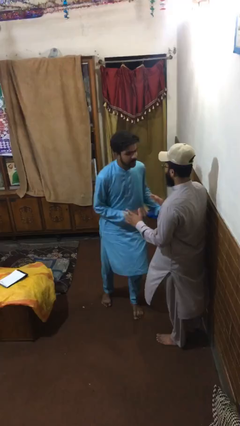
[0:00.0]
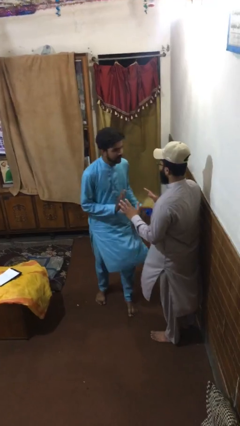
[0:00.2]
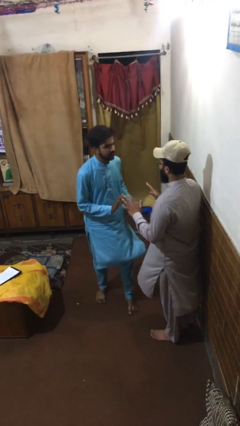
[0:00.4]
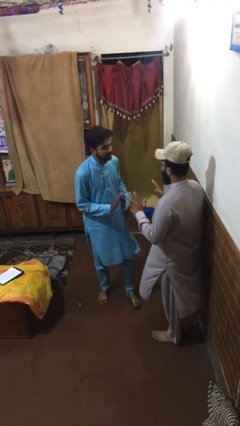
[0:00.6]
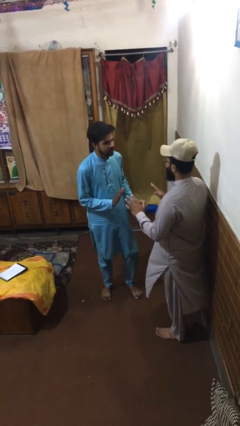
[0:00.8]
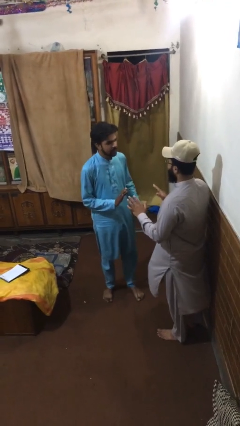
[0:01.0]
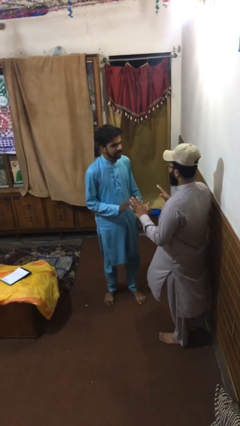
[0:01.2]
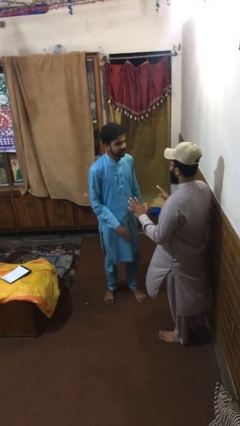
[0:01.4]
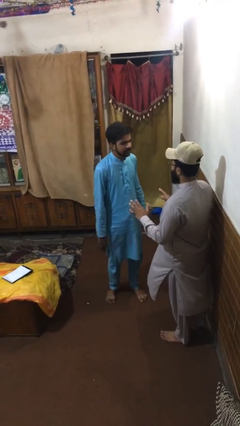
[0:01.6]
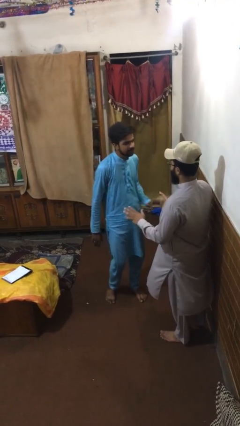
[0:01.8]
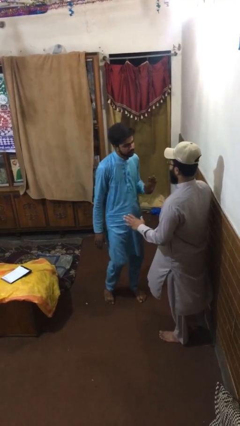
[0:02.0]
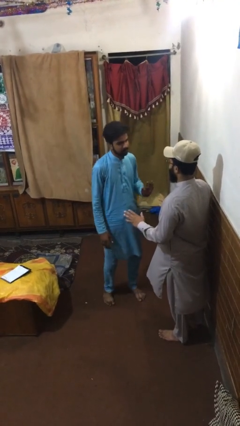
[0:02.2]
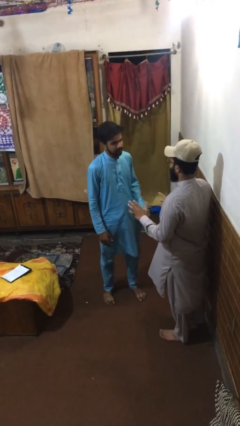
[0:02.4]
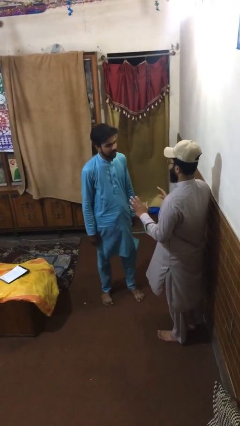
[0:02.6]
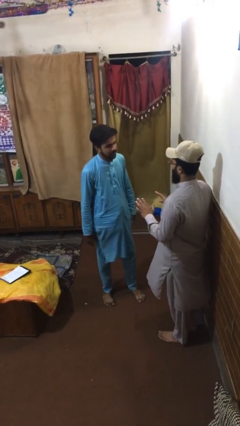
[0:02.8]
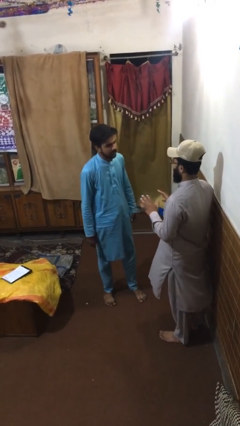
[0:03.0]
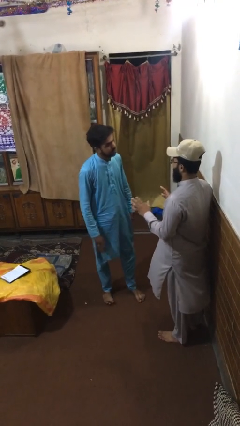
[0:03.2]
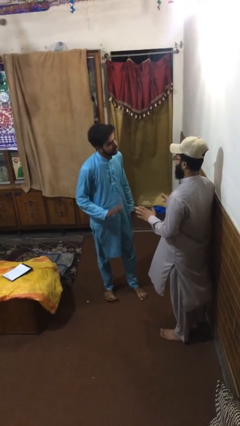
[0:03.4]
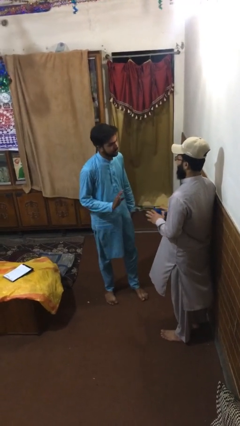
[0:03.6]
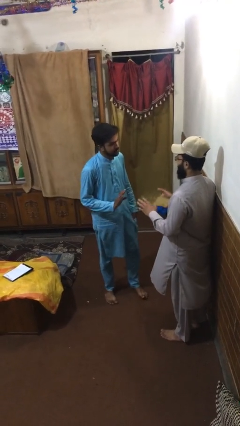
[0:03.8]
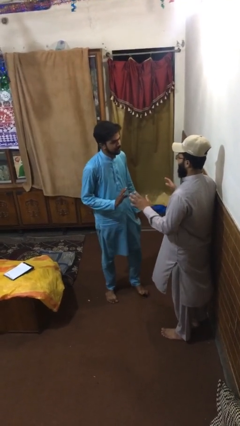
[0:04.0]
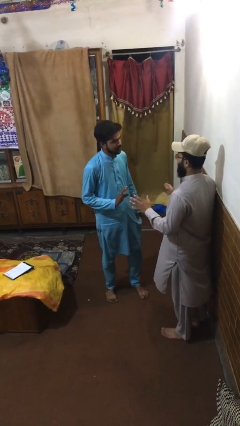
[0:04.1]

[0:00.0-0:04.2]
person talks to person

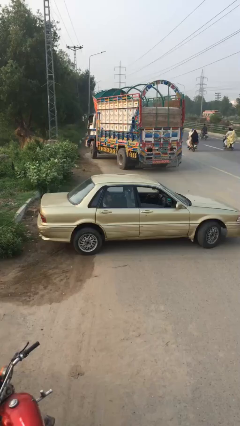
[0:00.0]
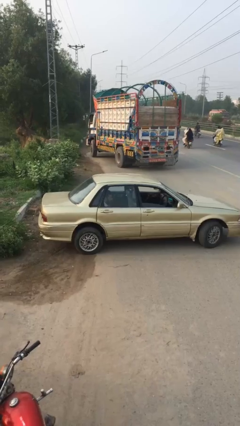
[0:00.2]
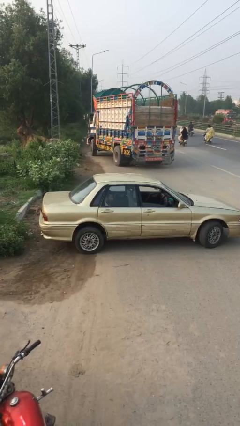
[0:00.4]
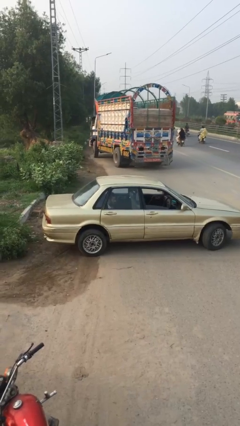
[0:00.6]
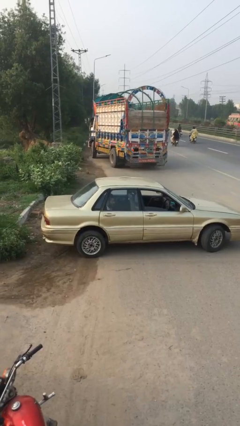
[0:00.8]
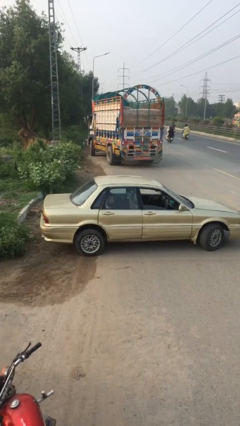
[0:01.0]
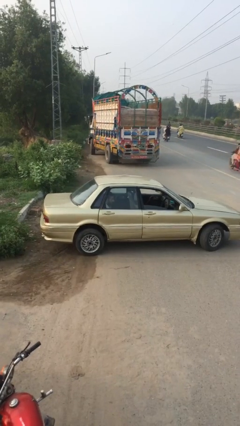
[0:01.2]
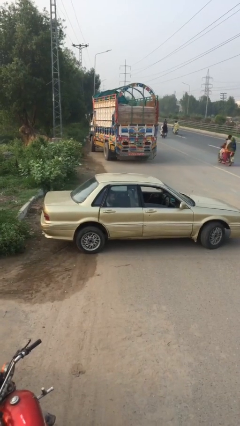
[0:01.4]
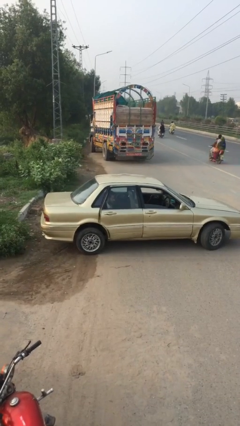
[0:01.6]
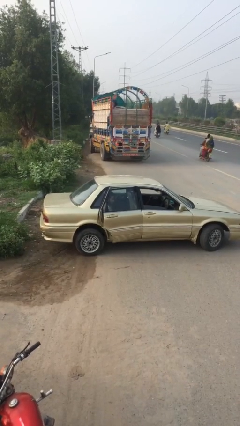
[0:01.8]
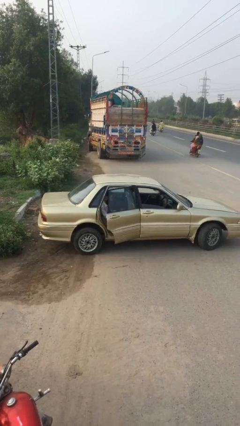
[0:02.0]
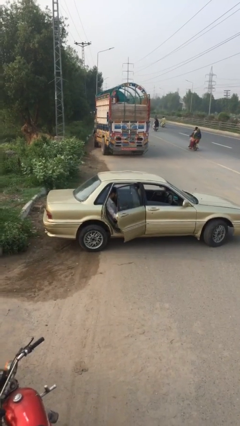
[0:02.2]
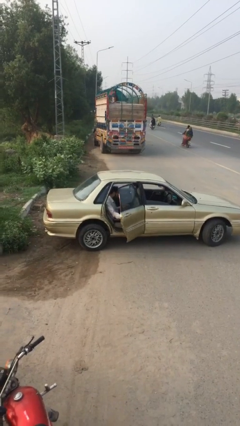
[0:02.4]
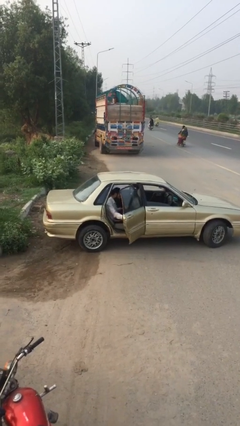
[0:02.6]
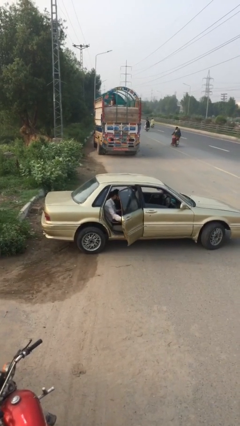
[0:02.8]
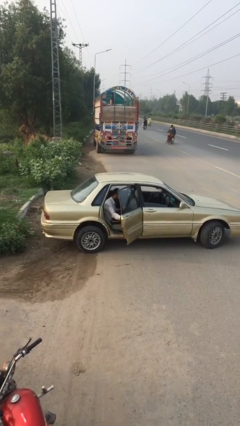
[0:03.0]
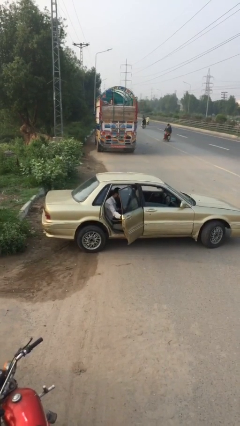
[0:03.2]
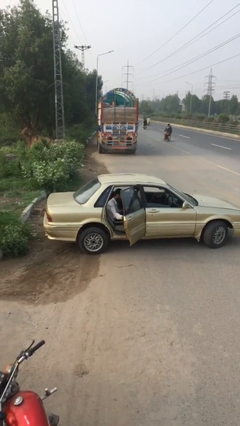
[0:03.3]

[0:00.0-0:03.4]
person opens car door

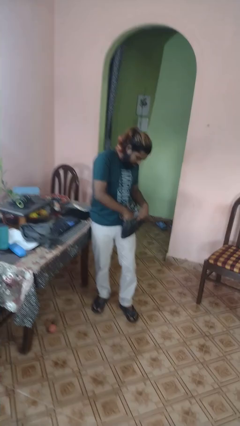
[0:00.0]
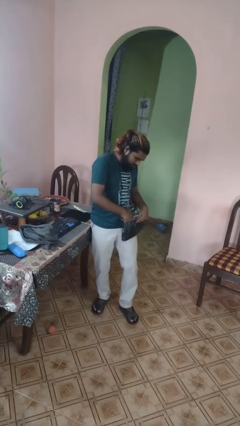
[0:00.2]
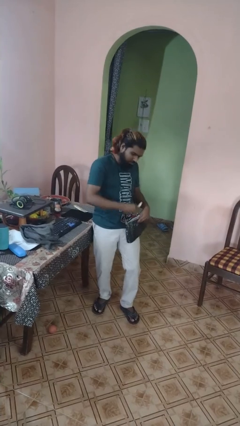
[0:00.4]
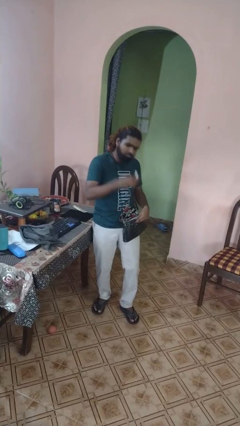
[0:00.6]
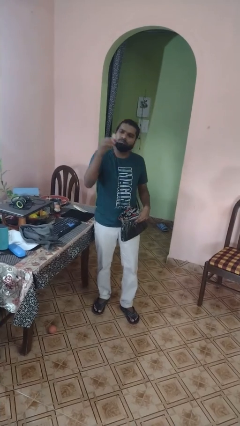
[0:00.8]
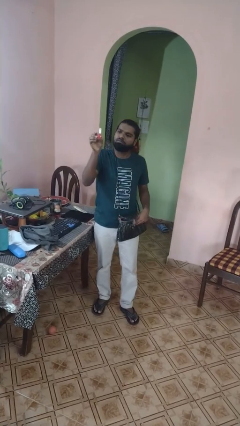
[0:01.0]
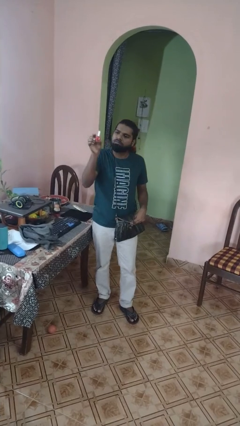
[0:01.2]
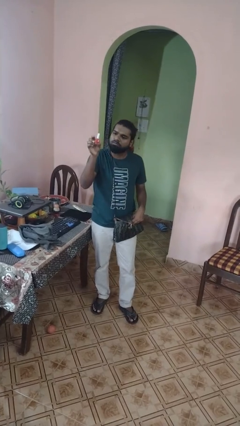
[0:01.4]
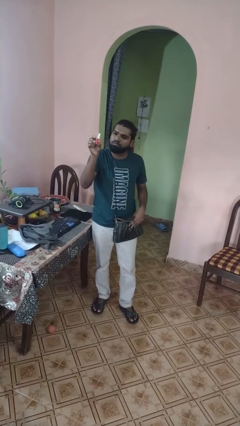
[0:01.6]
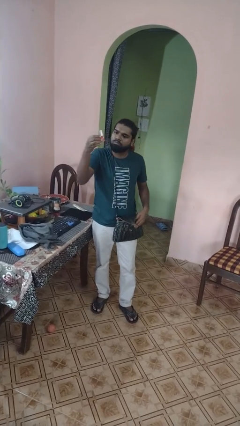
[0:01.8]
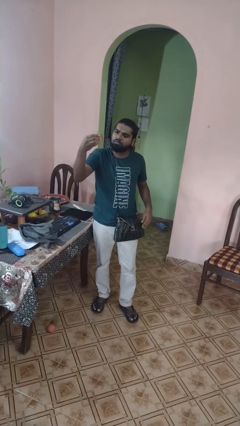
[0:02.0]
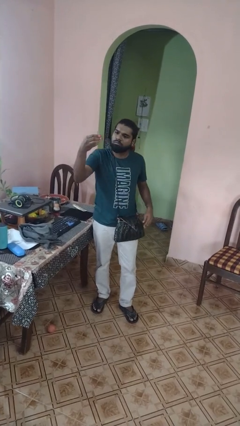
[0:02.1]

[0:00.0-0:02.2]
person takes object from purse

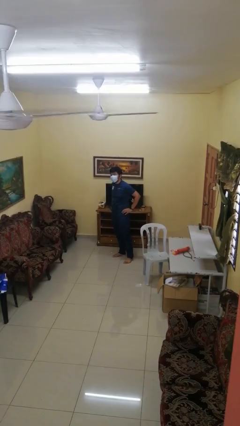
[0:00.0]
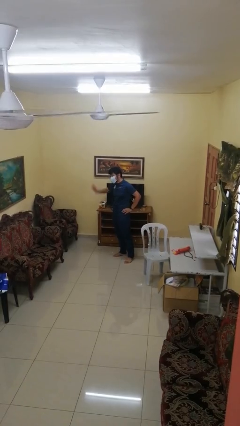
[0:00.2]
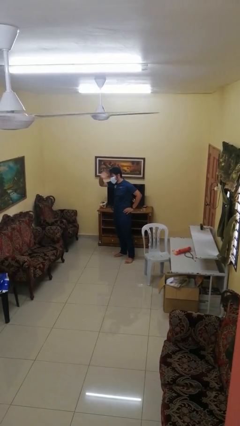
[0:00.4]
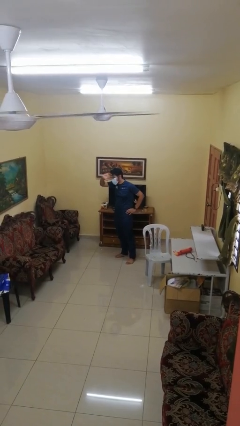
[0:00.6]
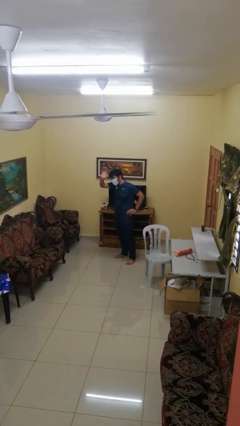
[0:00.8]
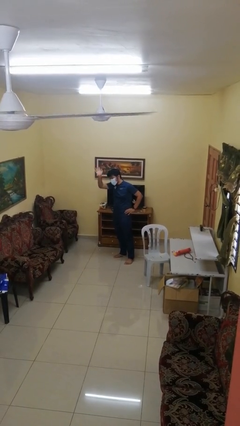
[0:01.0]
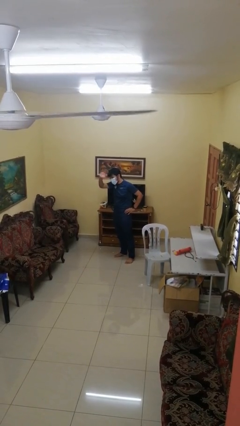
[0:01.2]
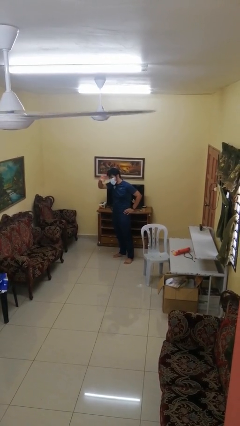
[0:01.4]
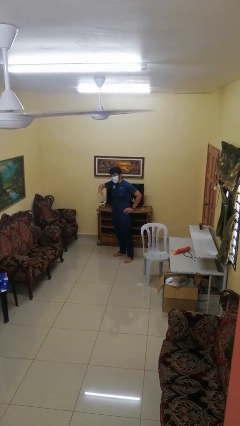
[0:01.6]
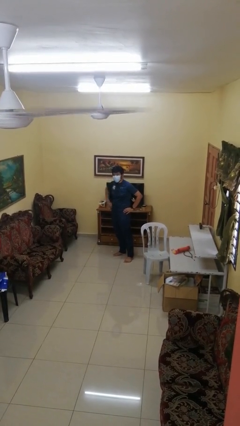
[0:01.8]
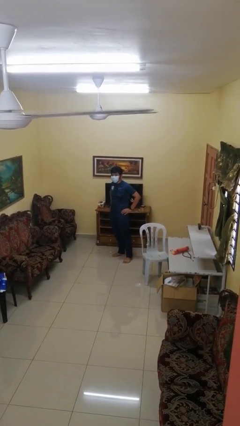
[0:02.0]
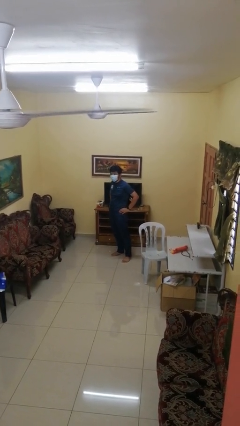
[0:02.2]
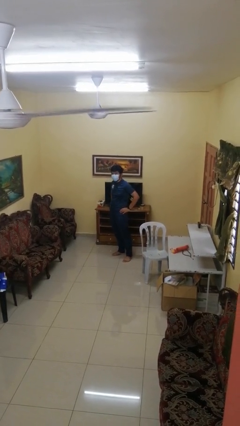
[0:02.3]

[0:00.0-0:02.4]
person waves at person

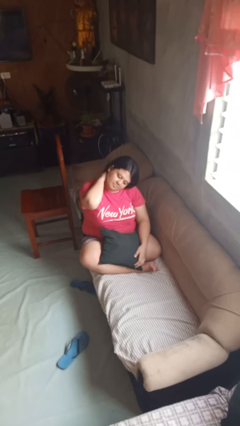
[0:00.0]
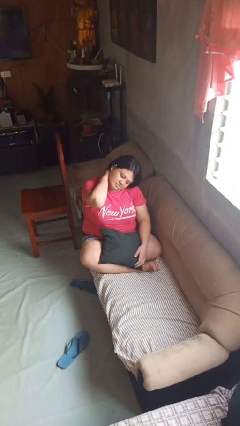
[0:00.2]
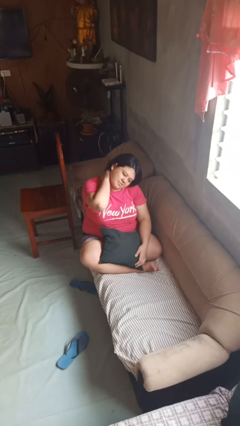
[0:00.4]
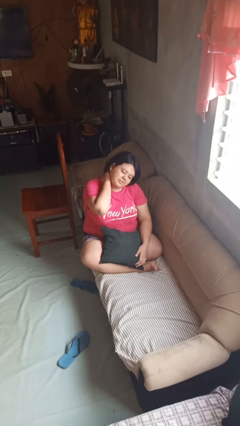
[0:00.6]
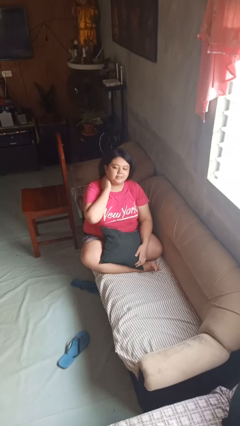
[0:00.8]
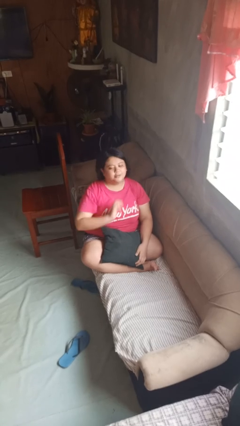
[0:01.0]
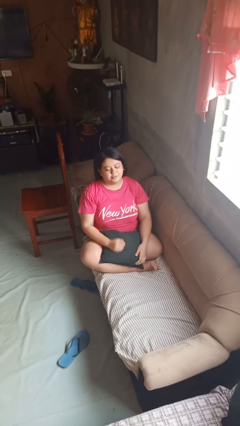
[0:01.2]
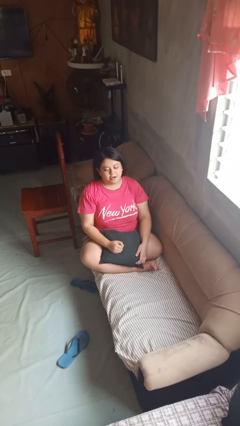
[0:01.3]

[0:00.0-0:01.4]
person rubs neck

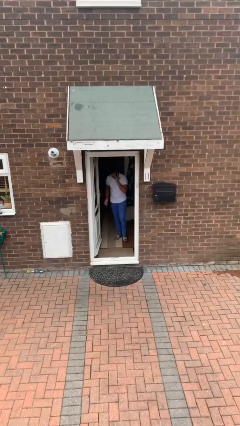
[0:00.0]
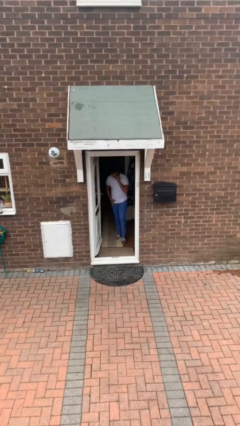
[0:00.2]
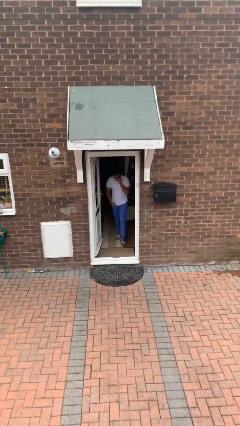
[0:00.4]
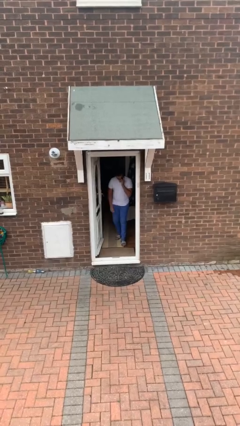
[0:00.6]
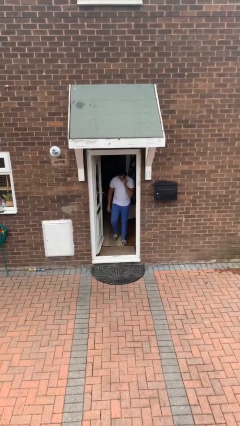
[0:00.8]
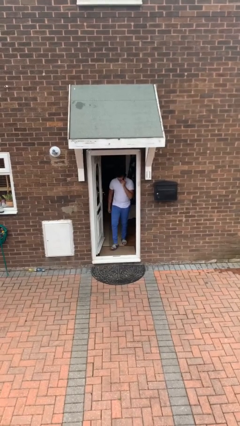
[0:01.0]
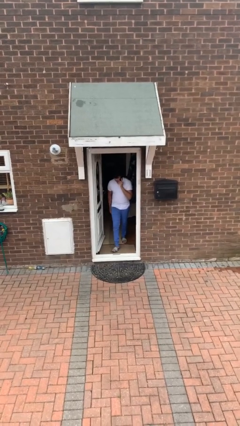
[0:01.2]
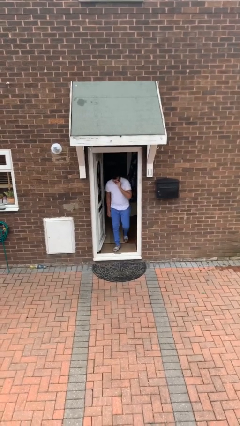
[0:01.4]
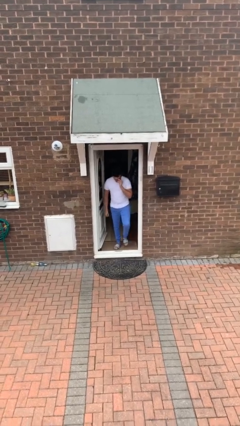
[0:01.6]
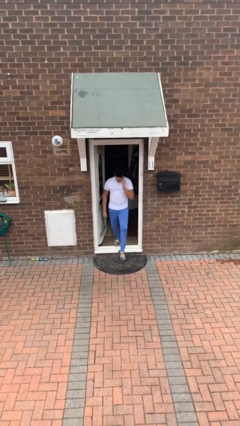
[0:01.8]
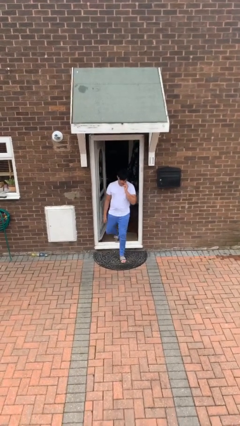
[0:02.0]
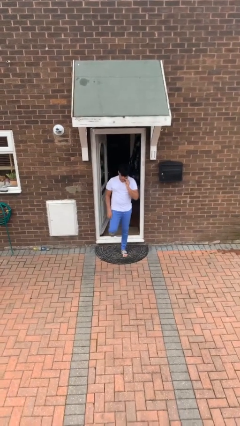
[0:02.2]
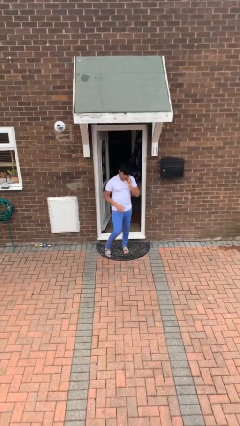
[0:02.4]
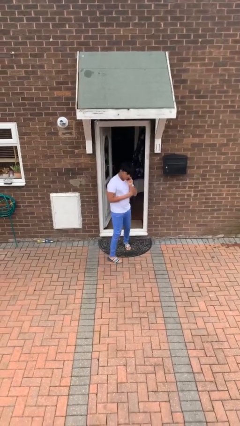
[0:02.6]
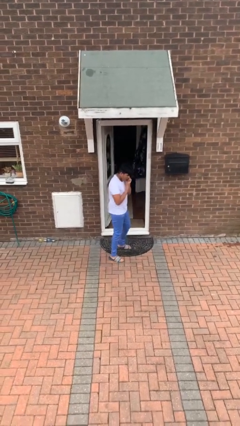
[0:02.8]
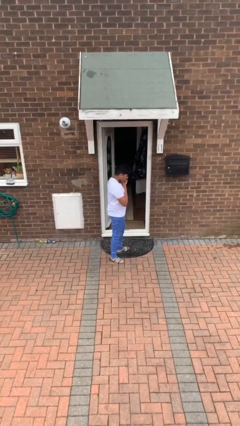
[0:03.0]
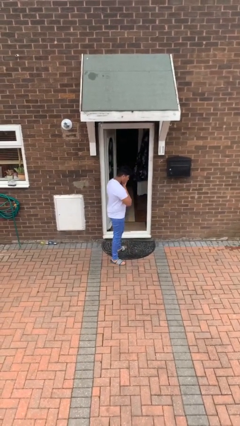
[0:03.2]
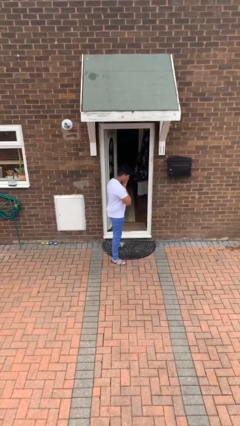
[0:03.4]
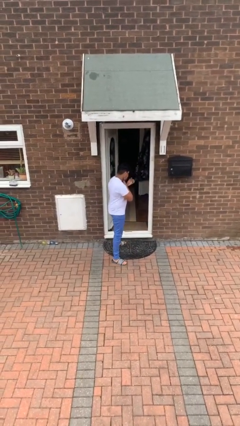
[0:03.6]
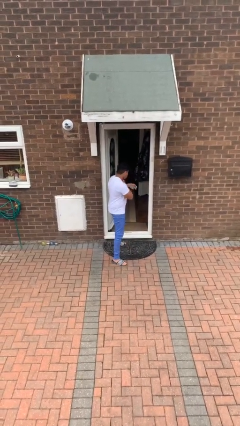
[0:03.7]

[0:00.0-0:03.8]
person enters scene through structure

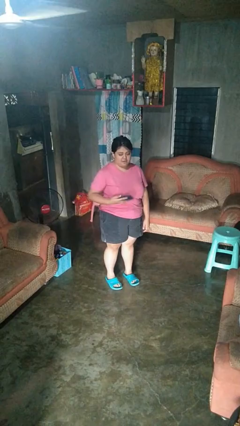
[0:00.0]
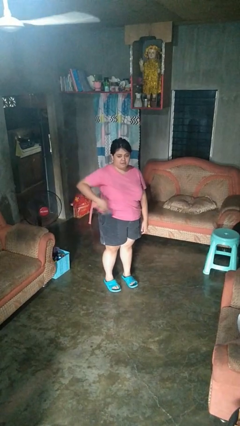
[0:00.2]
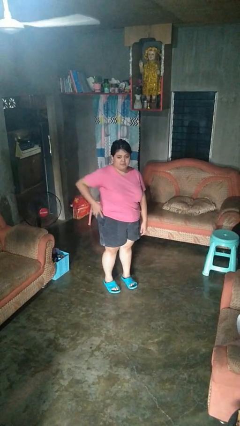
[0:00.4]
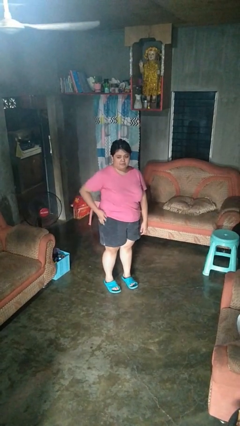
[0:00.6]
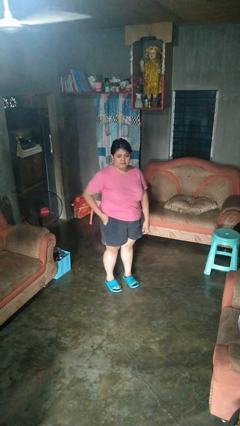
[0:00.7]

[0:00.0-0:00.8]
person puts phone into pocket
